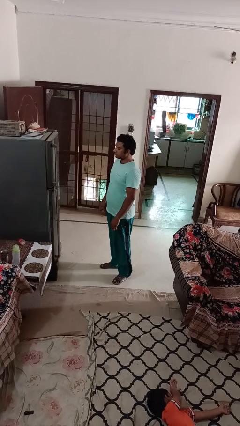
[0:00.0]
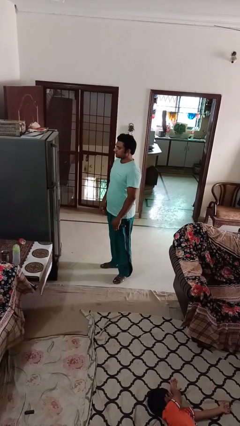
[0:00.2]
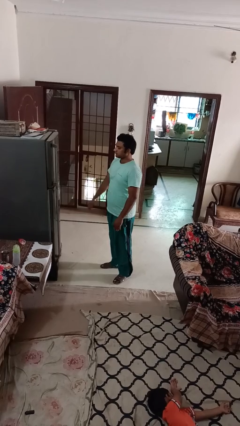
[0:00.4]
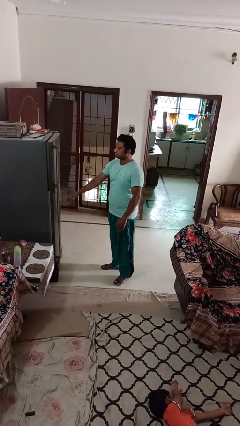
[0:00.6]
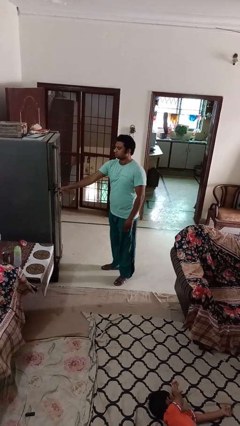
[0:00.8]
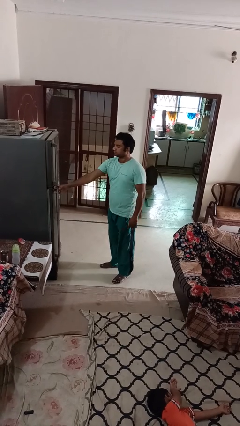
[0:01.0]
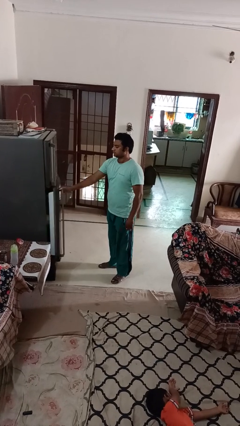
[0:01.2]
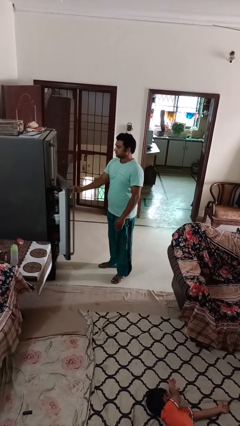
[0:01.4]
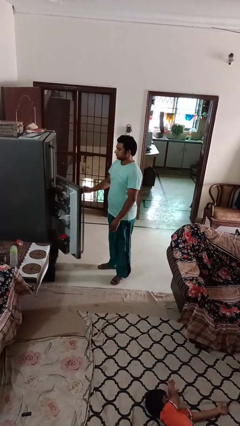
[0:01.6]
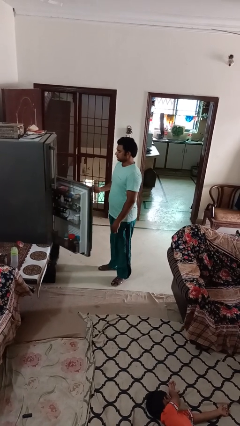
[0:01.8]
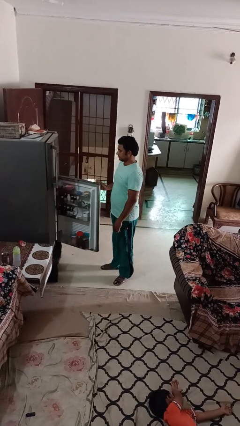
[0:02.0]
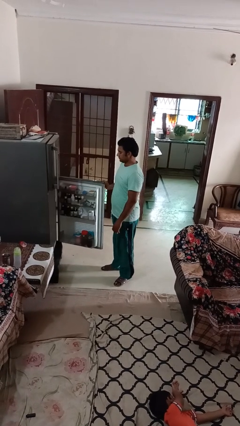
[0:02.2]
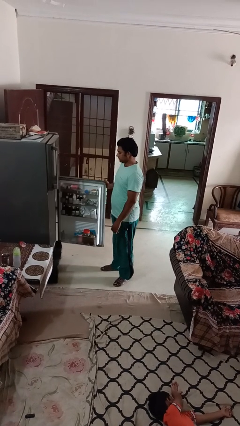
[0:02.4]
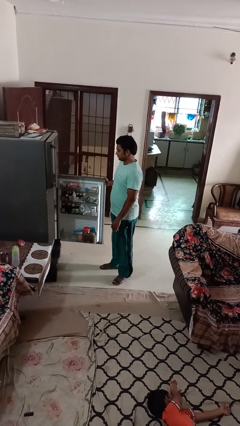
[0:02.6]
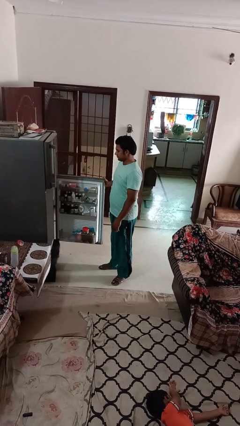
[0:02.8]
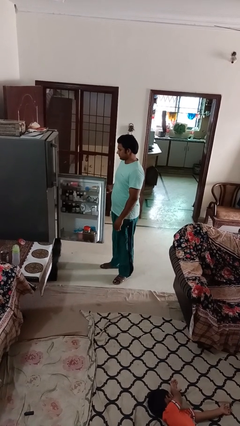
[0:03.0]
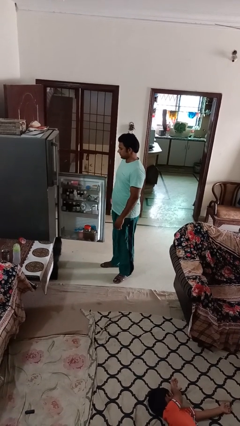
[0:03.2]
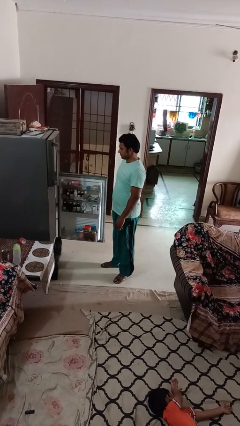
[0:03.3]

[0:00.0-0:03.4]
person opens refrigerator

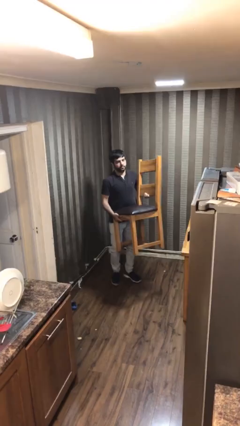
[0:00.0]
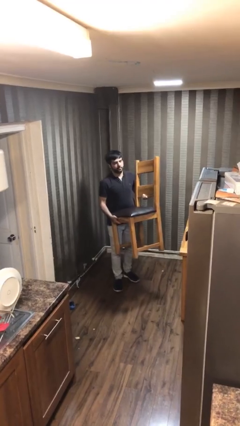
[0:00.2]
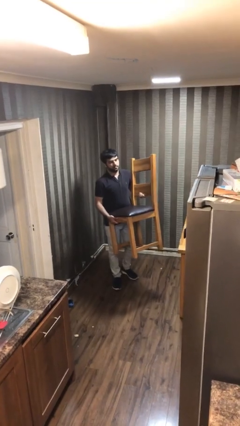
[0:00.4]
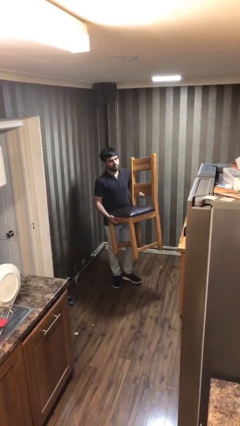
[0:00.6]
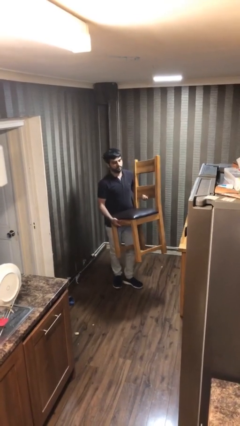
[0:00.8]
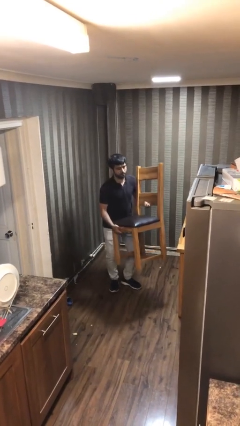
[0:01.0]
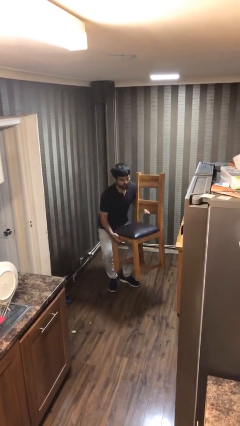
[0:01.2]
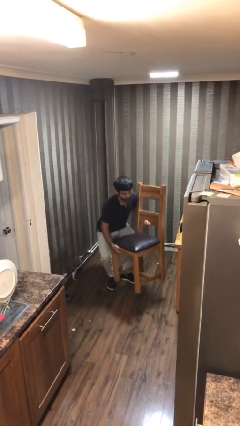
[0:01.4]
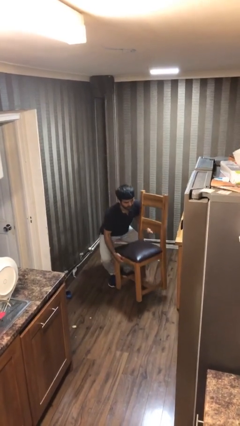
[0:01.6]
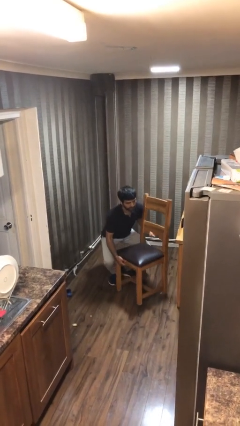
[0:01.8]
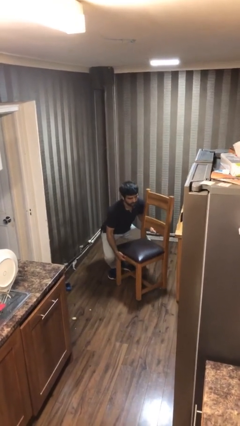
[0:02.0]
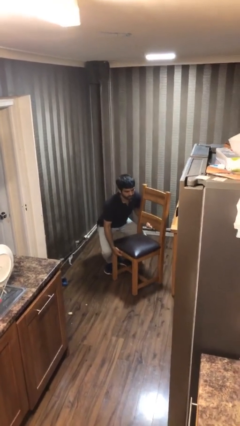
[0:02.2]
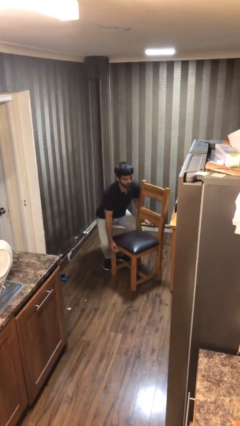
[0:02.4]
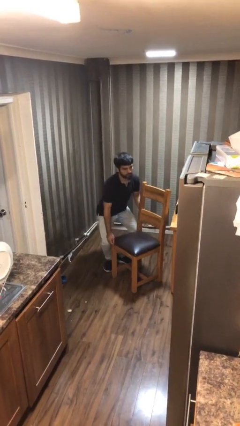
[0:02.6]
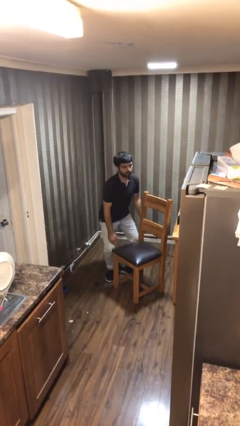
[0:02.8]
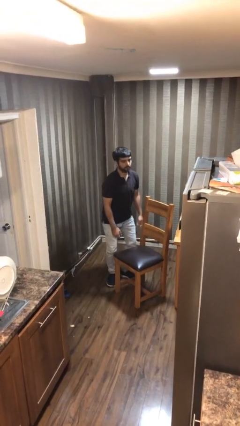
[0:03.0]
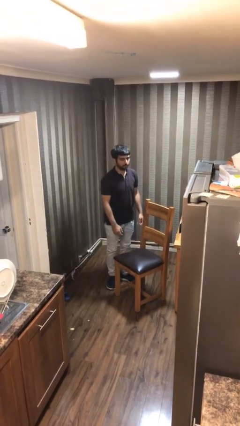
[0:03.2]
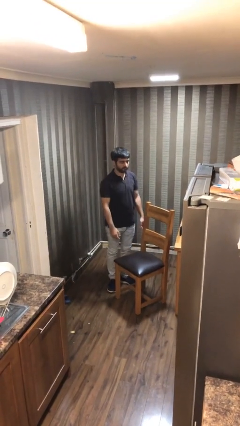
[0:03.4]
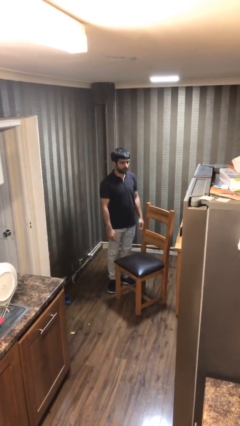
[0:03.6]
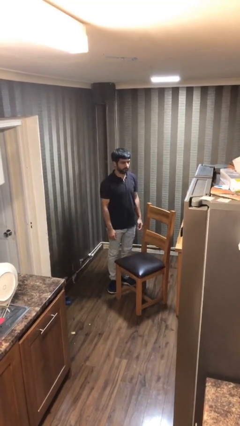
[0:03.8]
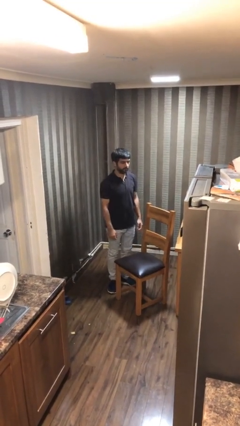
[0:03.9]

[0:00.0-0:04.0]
person puts down object on floor

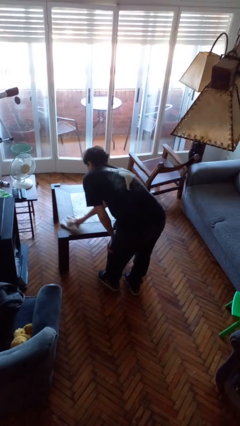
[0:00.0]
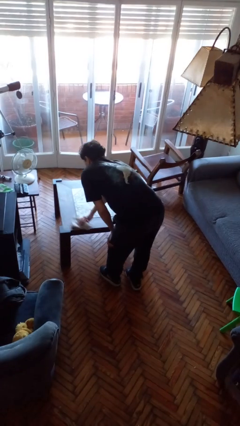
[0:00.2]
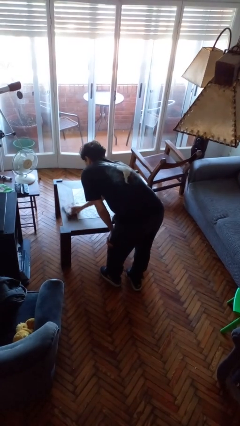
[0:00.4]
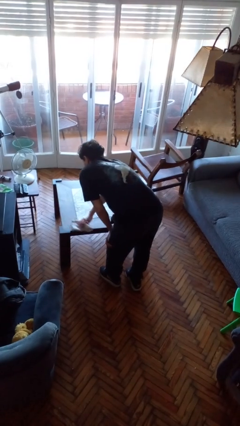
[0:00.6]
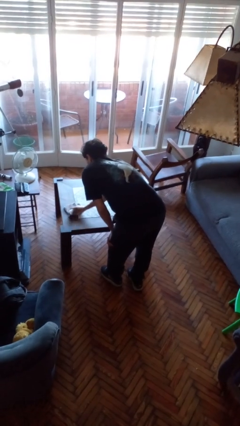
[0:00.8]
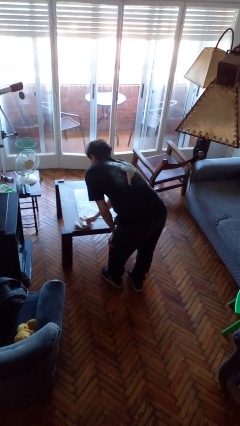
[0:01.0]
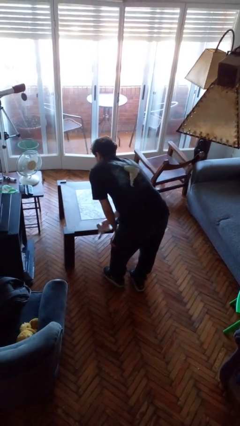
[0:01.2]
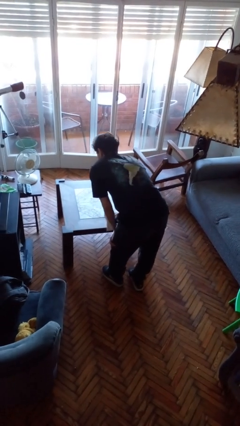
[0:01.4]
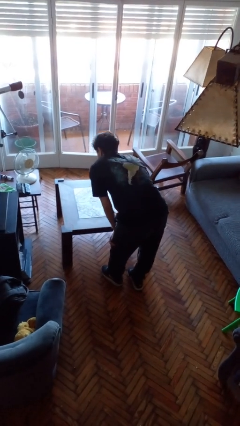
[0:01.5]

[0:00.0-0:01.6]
person cleans table with rag

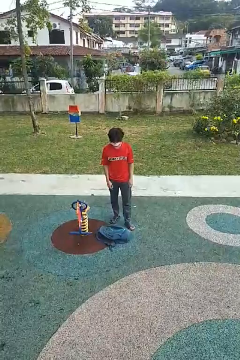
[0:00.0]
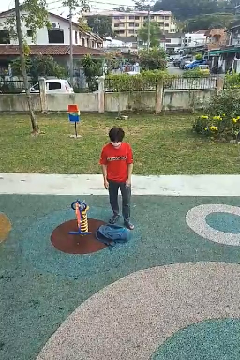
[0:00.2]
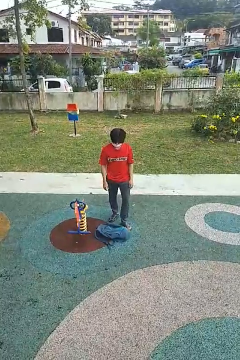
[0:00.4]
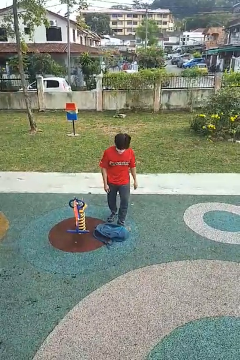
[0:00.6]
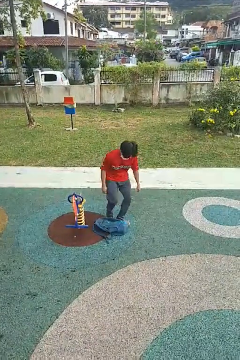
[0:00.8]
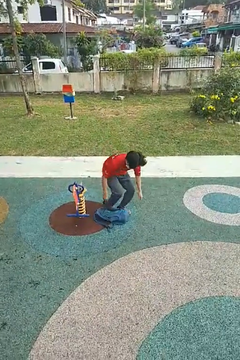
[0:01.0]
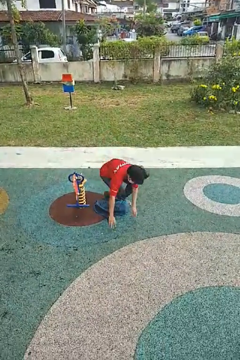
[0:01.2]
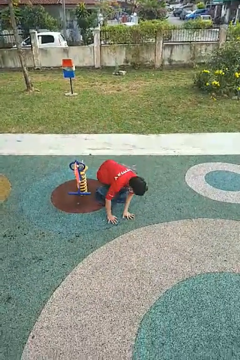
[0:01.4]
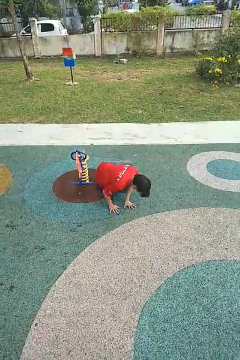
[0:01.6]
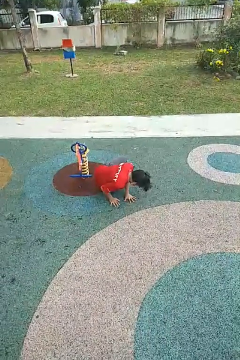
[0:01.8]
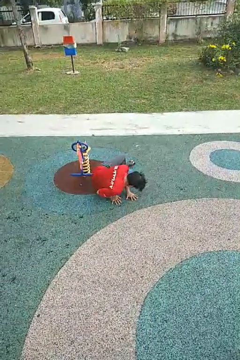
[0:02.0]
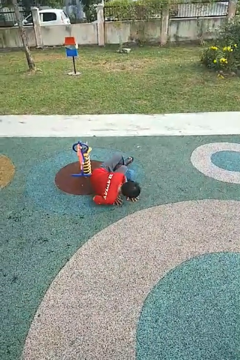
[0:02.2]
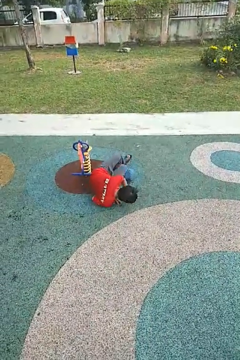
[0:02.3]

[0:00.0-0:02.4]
person trips on object on floor

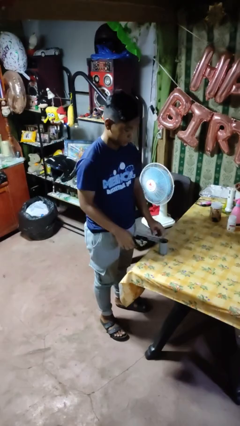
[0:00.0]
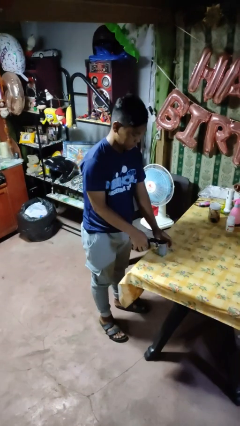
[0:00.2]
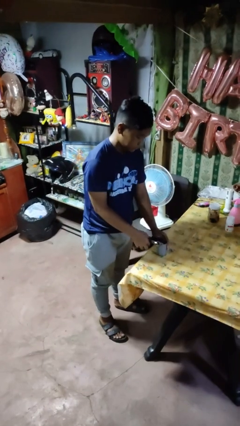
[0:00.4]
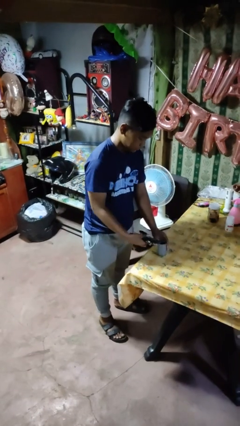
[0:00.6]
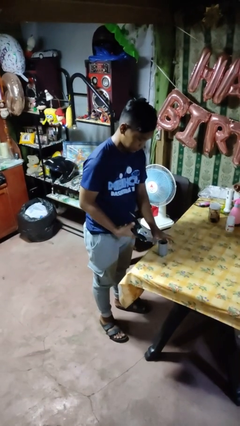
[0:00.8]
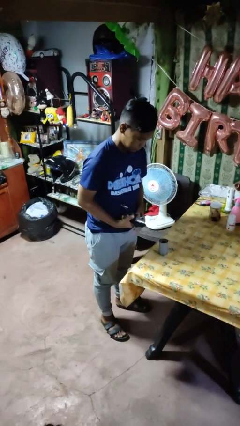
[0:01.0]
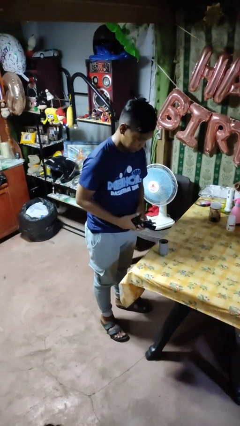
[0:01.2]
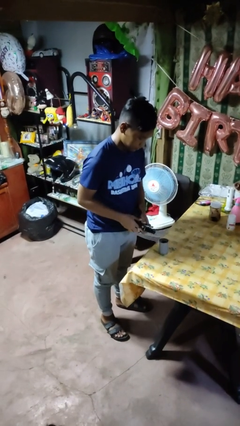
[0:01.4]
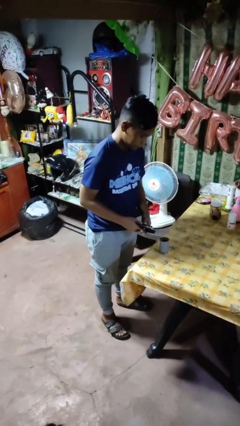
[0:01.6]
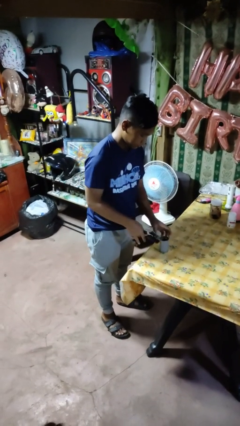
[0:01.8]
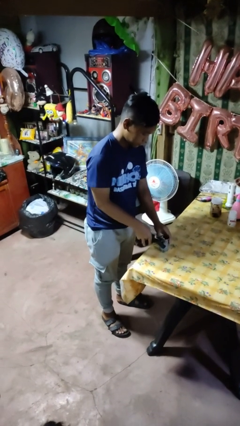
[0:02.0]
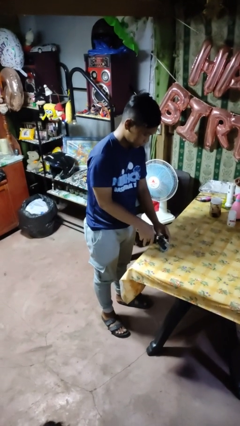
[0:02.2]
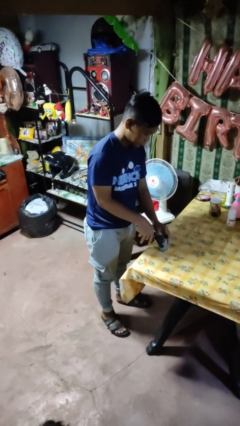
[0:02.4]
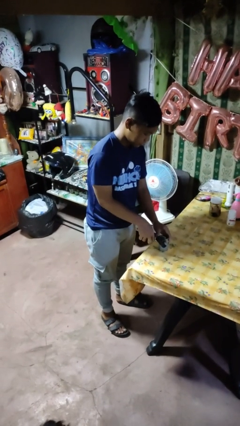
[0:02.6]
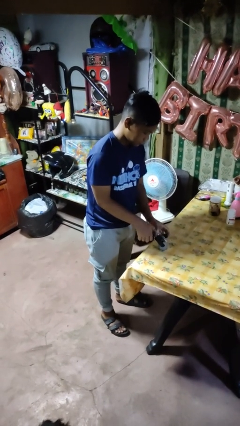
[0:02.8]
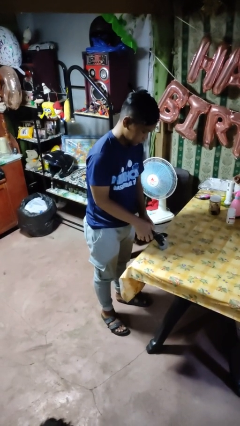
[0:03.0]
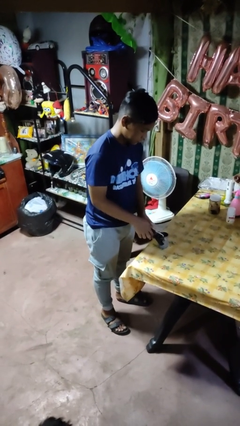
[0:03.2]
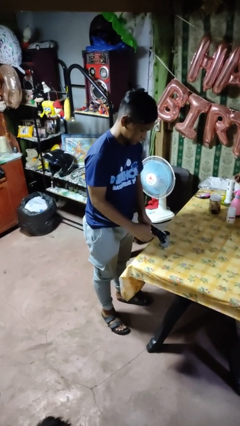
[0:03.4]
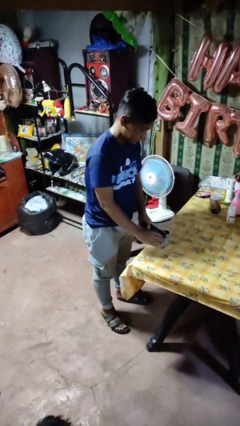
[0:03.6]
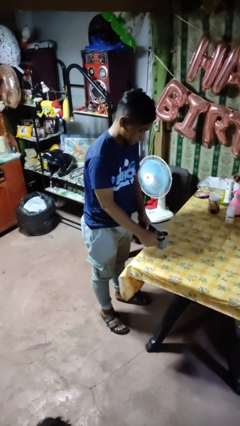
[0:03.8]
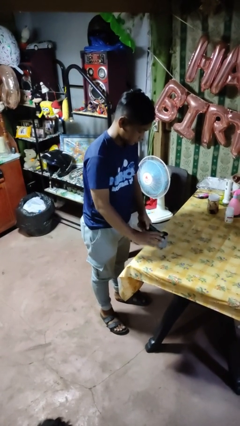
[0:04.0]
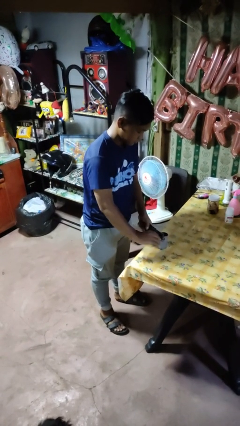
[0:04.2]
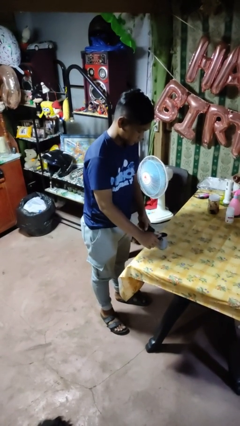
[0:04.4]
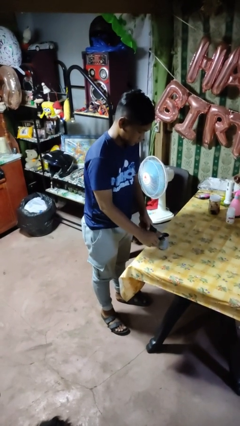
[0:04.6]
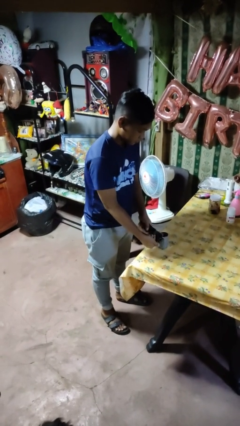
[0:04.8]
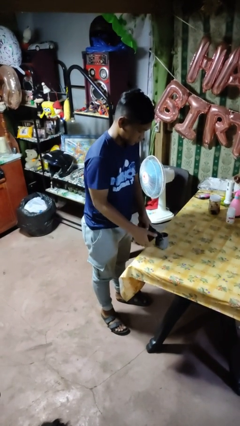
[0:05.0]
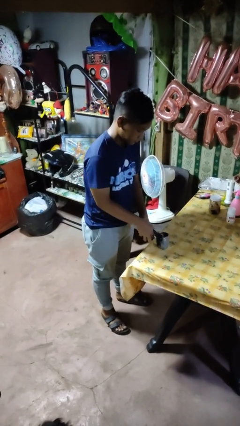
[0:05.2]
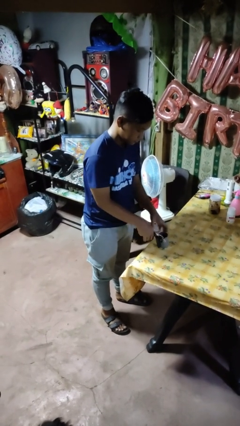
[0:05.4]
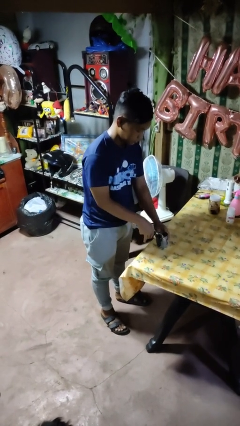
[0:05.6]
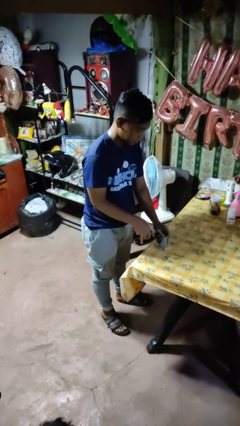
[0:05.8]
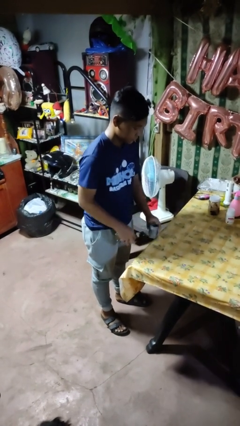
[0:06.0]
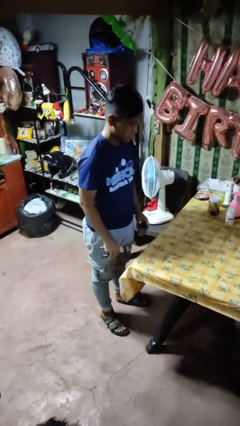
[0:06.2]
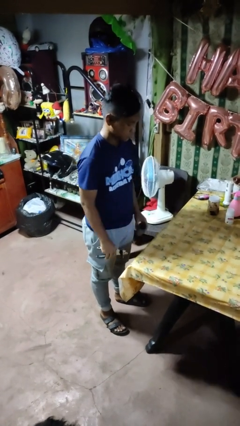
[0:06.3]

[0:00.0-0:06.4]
person opens can with can opener
